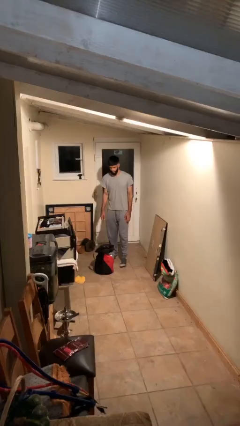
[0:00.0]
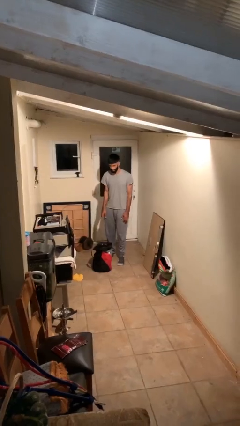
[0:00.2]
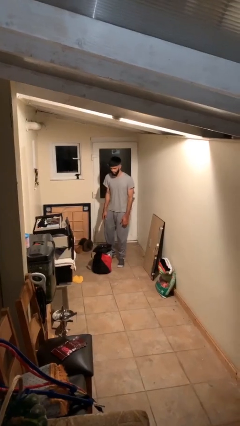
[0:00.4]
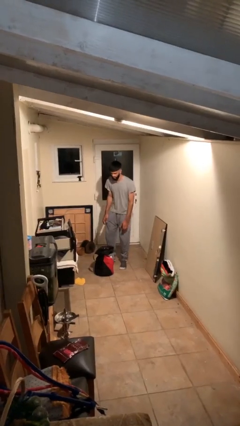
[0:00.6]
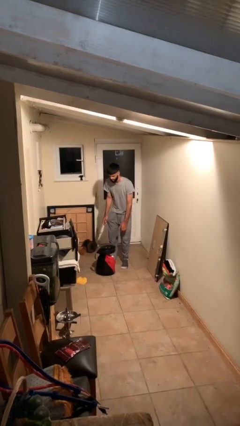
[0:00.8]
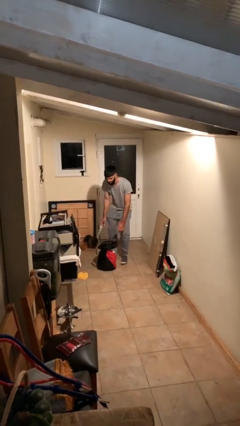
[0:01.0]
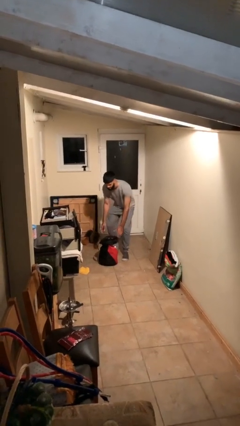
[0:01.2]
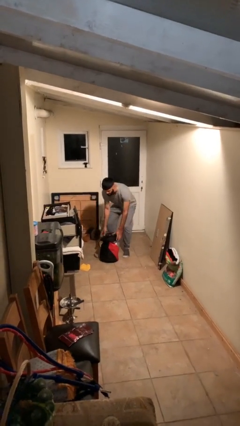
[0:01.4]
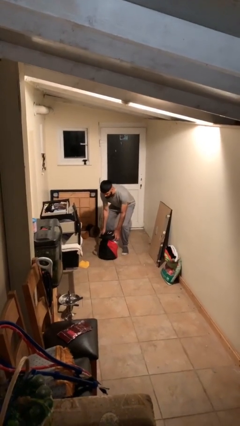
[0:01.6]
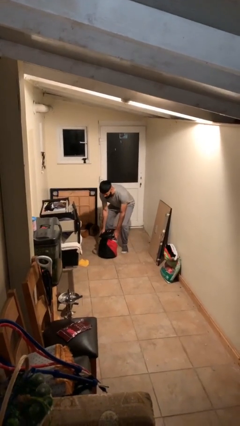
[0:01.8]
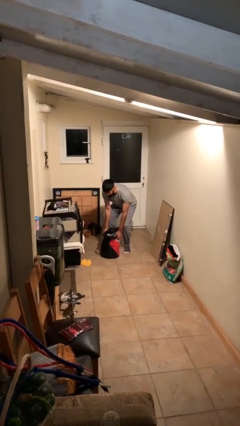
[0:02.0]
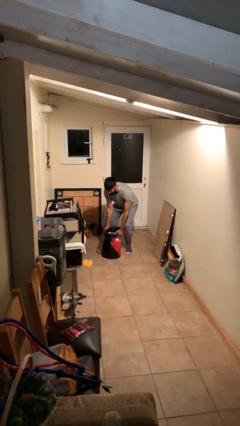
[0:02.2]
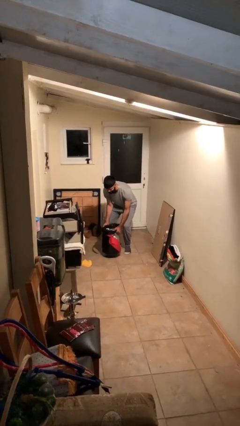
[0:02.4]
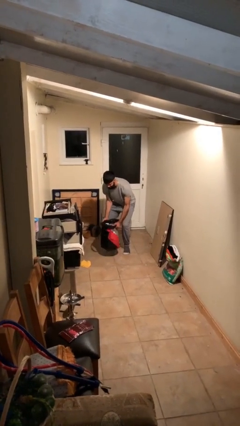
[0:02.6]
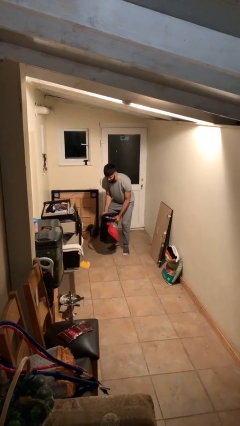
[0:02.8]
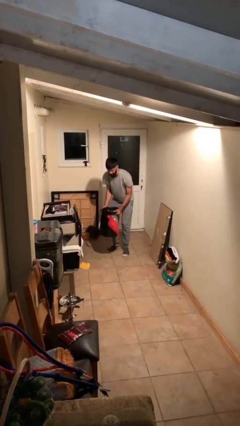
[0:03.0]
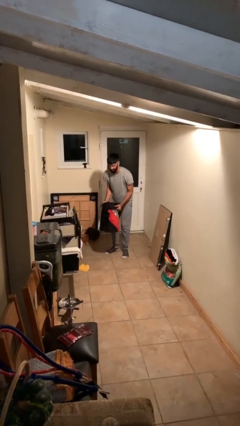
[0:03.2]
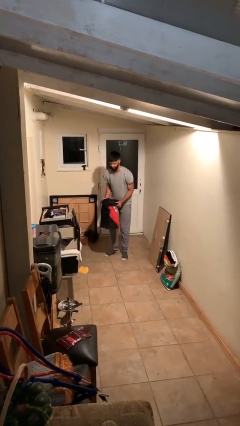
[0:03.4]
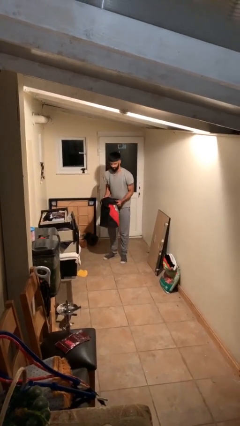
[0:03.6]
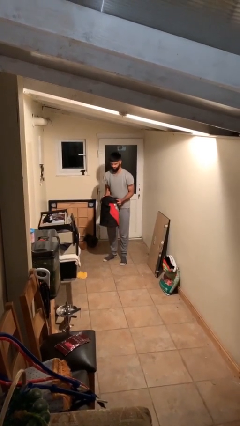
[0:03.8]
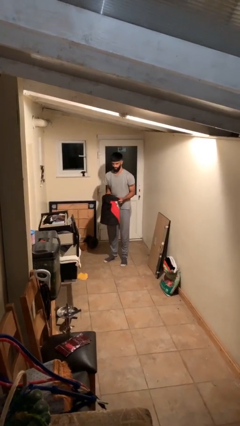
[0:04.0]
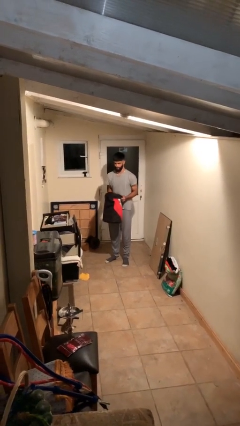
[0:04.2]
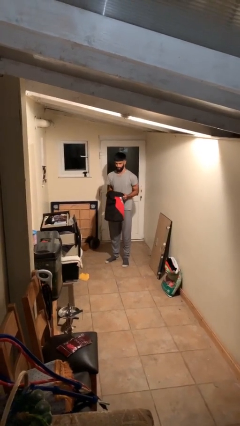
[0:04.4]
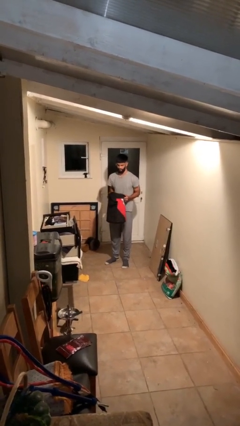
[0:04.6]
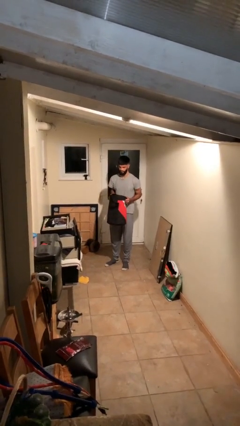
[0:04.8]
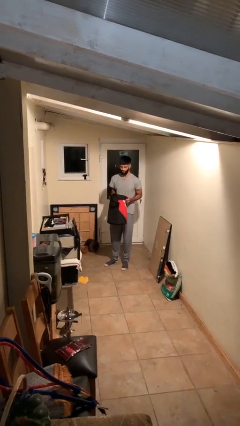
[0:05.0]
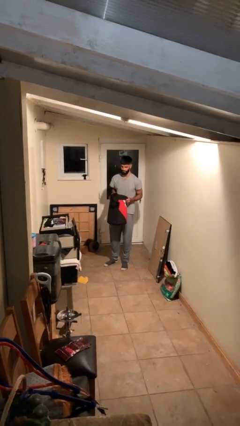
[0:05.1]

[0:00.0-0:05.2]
person picks up object from floor

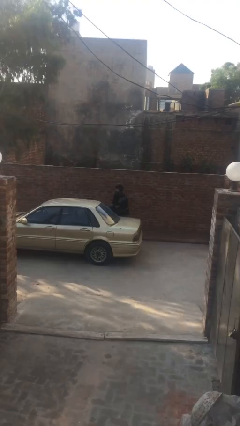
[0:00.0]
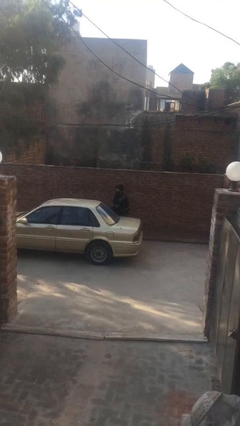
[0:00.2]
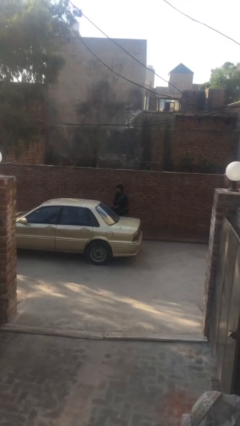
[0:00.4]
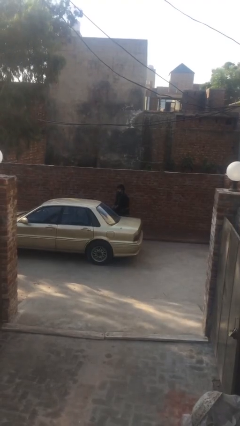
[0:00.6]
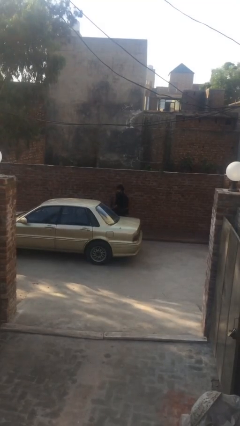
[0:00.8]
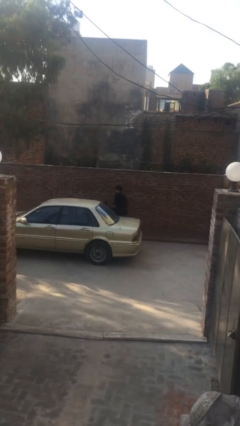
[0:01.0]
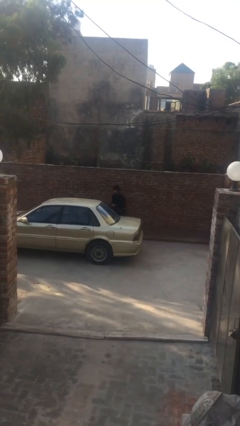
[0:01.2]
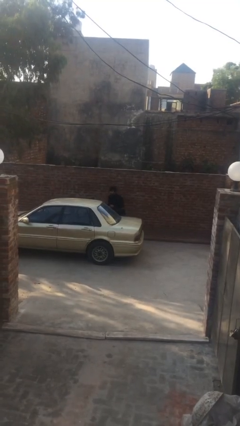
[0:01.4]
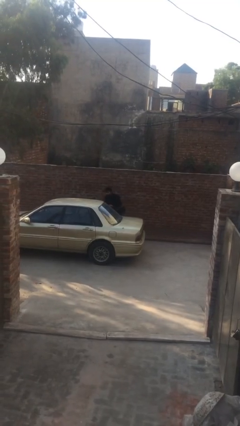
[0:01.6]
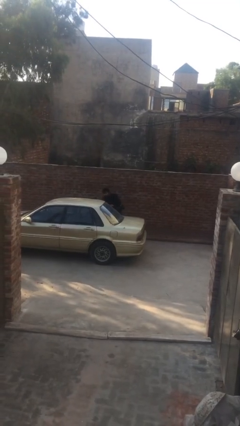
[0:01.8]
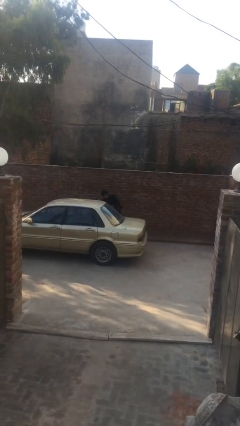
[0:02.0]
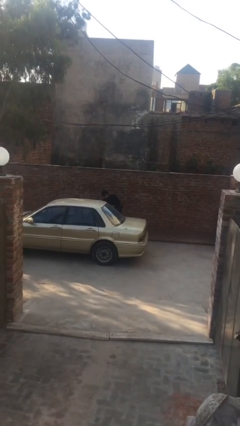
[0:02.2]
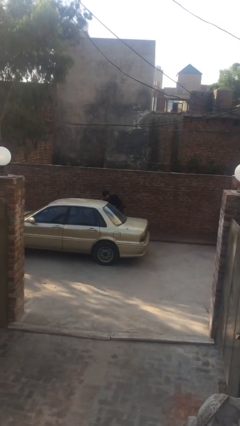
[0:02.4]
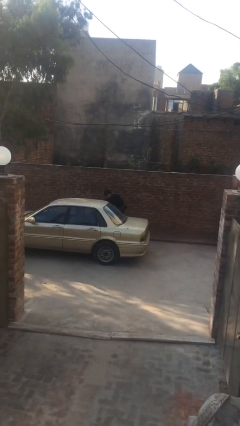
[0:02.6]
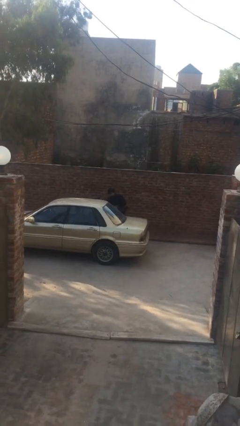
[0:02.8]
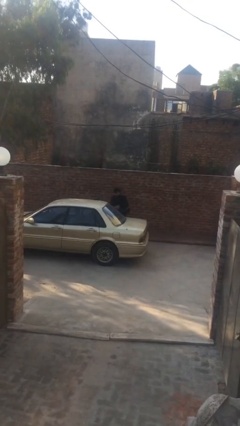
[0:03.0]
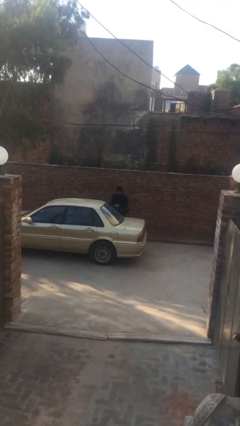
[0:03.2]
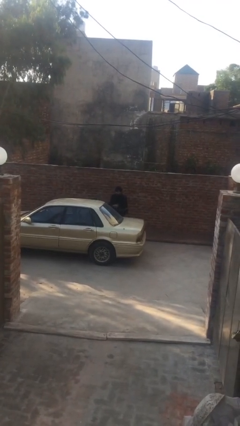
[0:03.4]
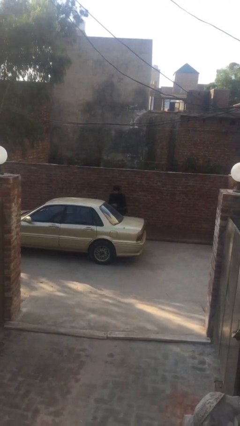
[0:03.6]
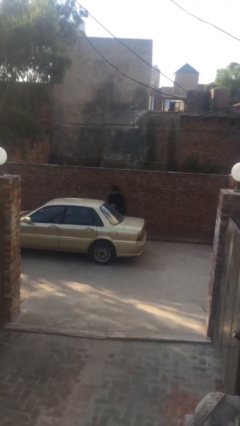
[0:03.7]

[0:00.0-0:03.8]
person loads car

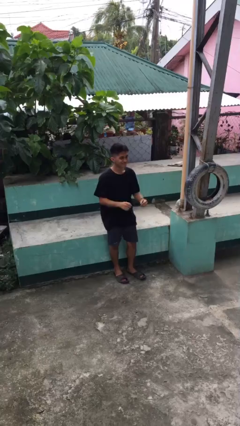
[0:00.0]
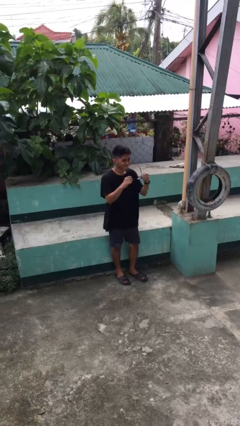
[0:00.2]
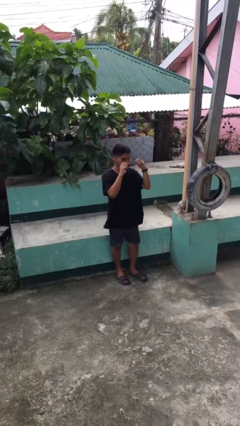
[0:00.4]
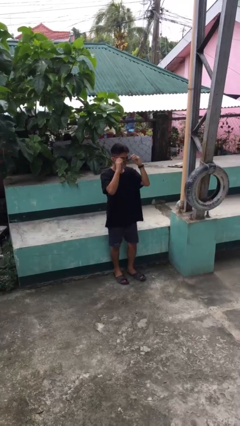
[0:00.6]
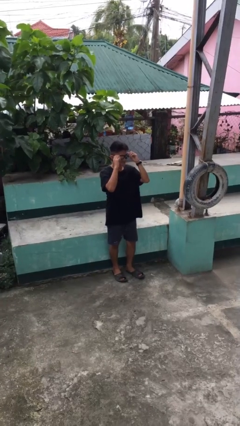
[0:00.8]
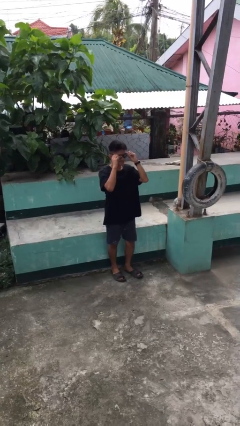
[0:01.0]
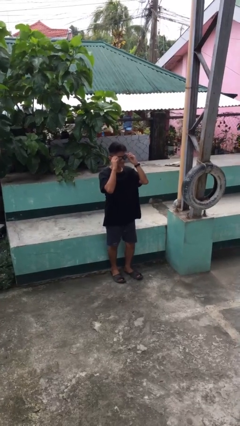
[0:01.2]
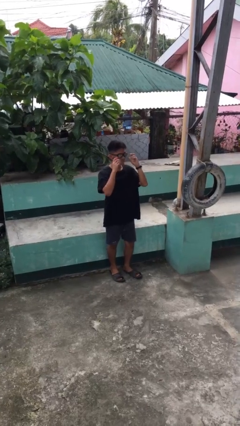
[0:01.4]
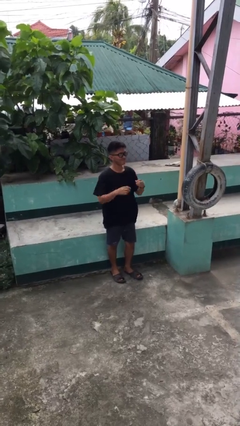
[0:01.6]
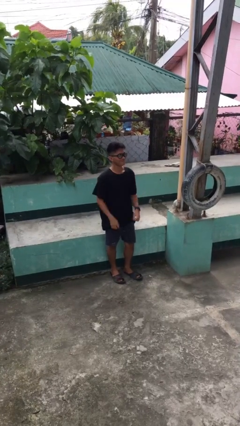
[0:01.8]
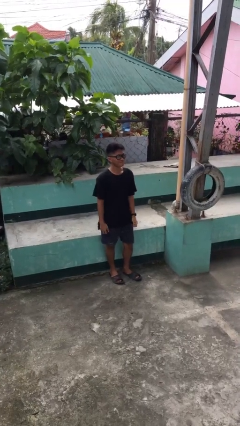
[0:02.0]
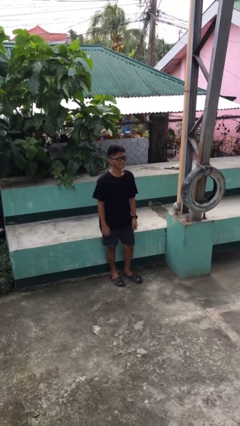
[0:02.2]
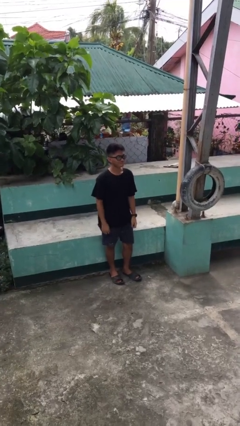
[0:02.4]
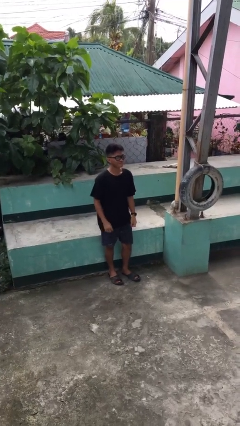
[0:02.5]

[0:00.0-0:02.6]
person puts on sunglasses

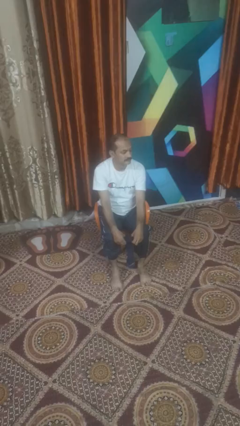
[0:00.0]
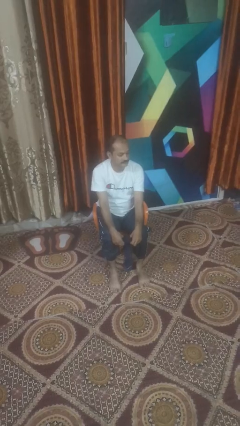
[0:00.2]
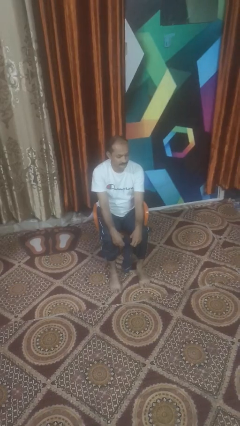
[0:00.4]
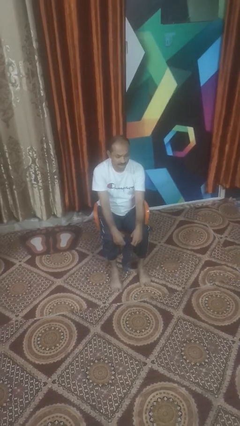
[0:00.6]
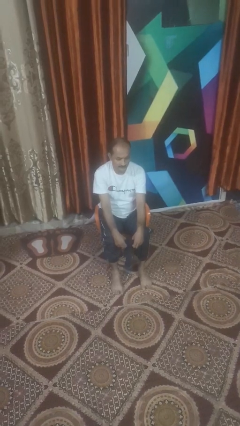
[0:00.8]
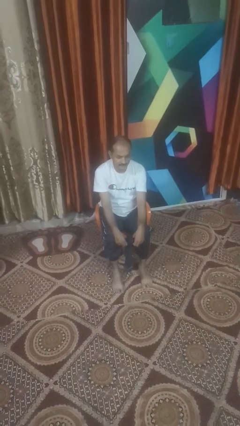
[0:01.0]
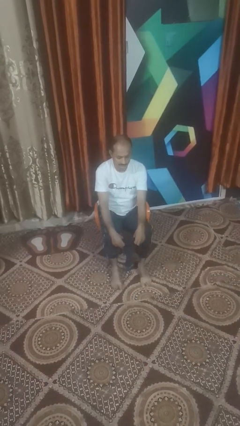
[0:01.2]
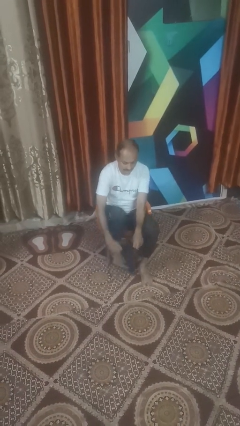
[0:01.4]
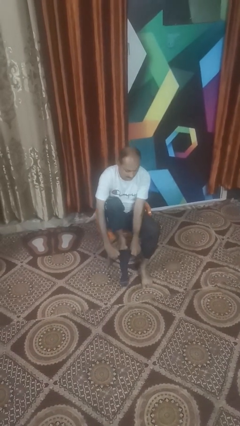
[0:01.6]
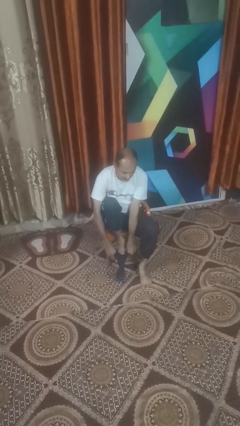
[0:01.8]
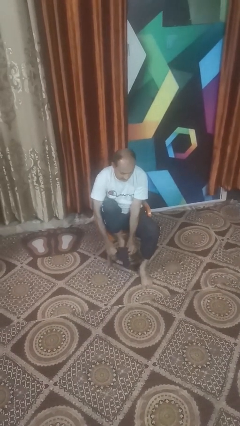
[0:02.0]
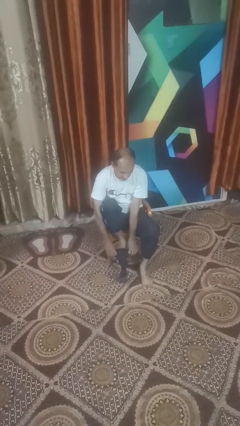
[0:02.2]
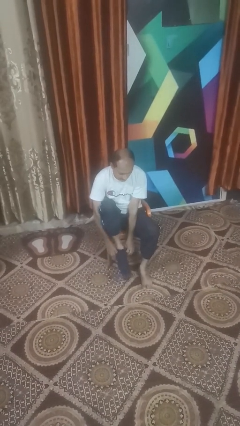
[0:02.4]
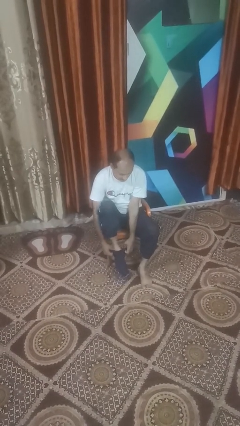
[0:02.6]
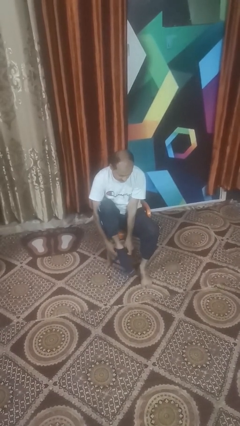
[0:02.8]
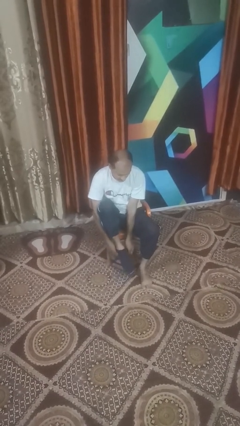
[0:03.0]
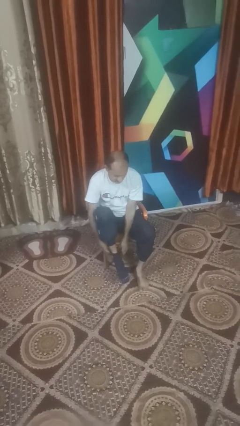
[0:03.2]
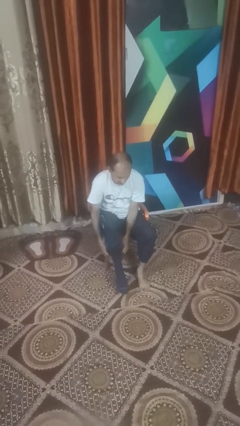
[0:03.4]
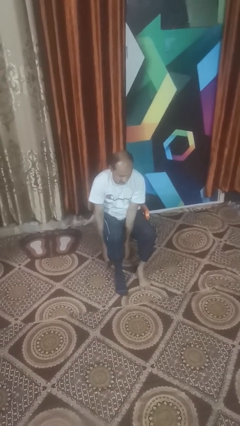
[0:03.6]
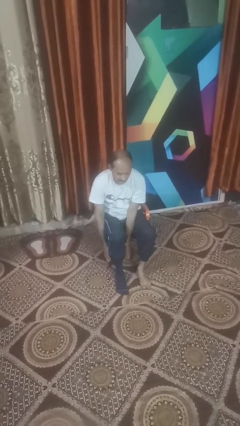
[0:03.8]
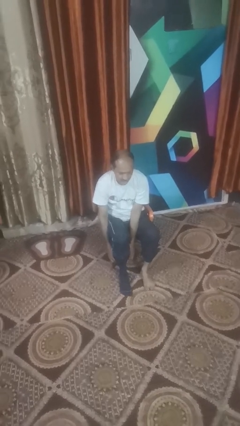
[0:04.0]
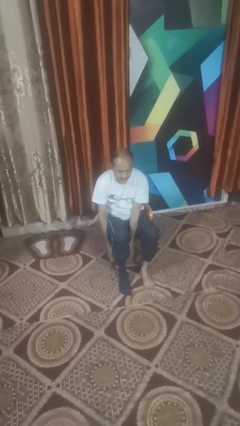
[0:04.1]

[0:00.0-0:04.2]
person puts on socks

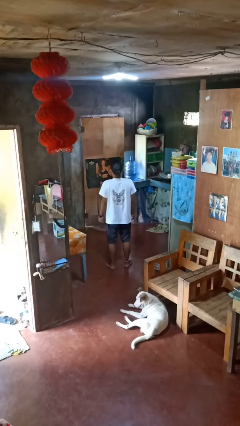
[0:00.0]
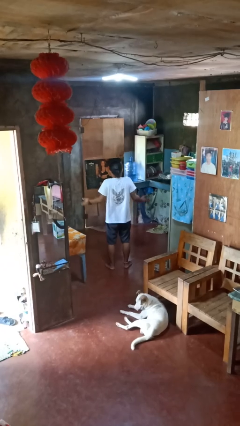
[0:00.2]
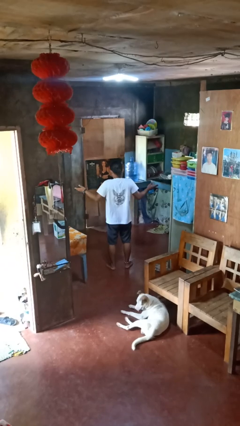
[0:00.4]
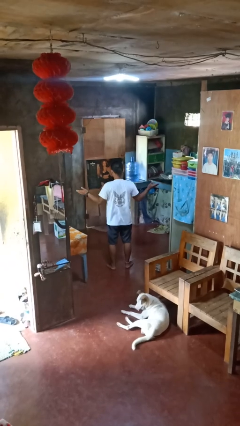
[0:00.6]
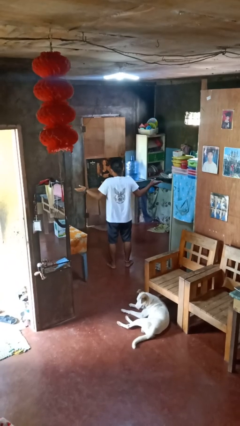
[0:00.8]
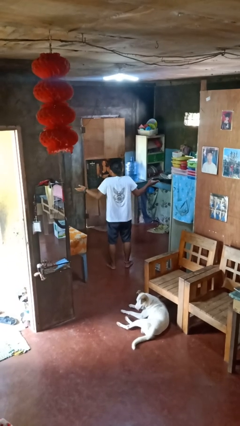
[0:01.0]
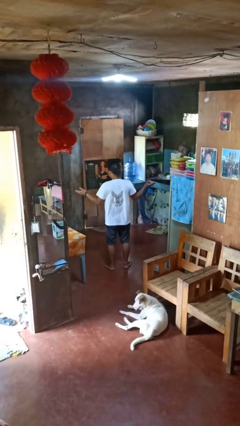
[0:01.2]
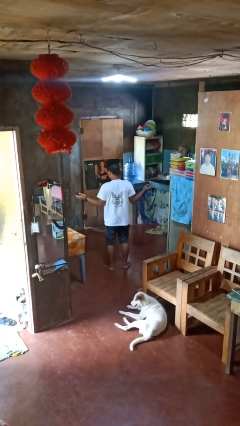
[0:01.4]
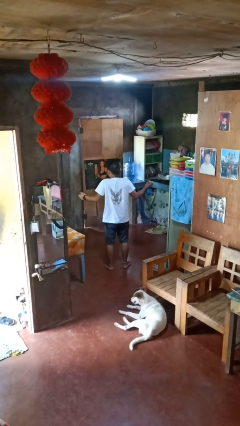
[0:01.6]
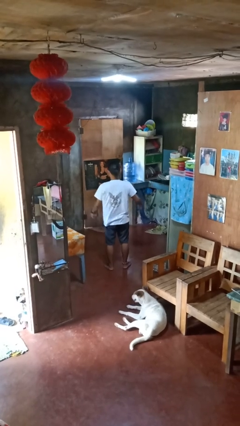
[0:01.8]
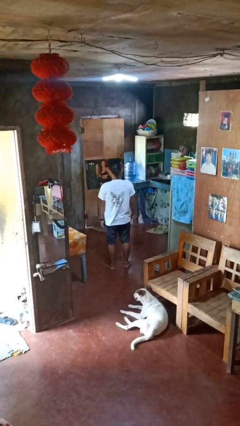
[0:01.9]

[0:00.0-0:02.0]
person shrugs
